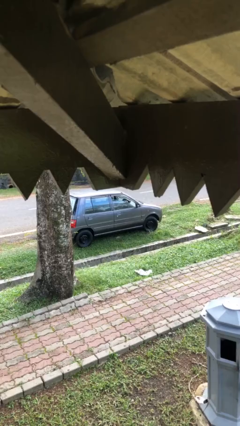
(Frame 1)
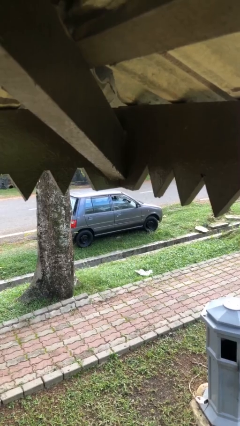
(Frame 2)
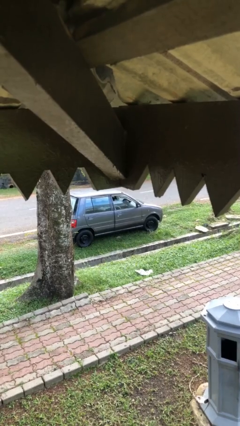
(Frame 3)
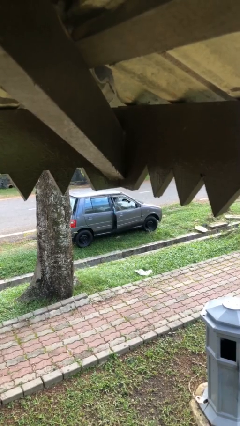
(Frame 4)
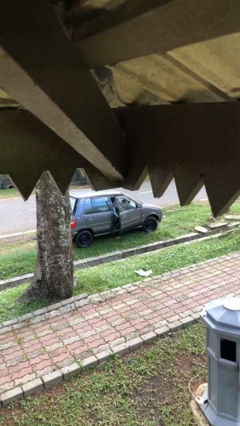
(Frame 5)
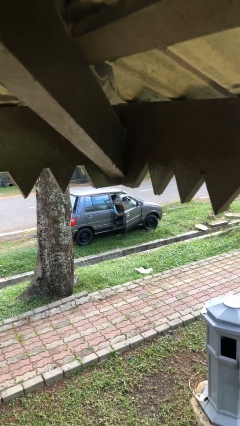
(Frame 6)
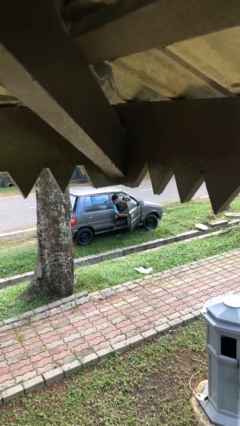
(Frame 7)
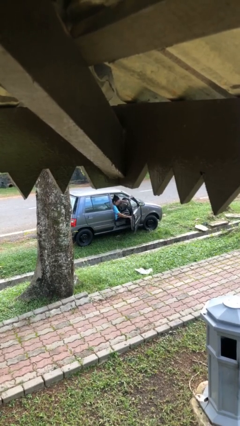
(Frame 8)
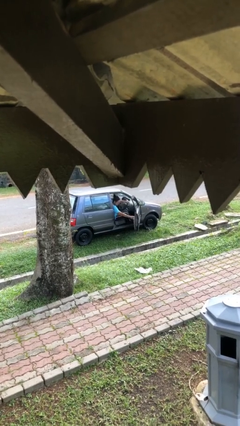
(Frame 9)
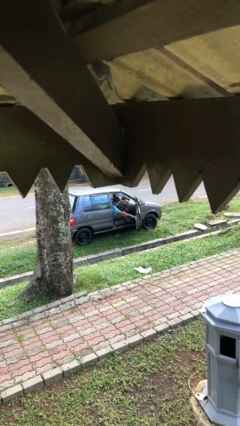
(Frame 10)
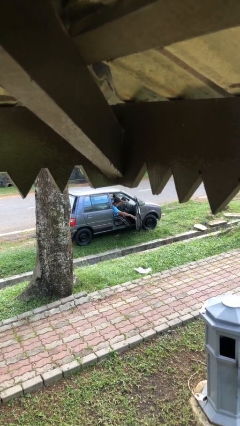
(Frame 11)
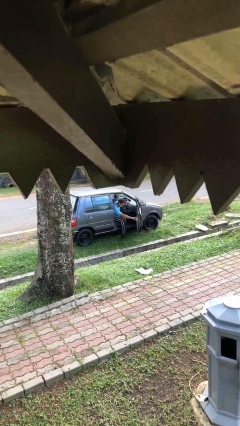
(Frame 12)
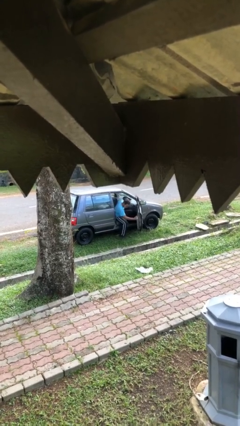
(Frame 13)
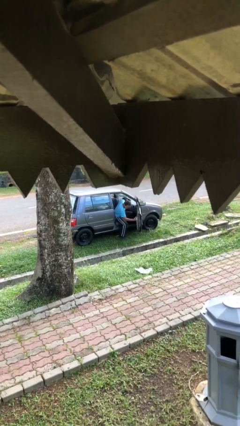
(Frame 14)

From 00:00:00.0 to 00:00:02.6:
person opens car door

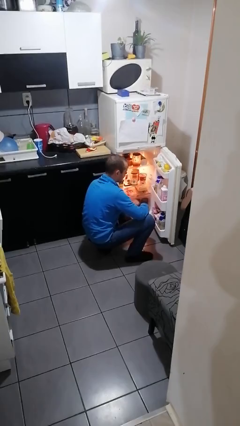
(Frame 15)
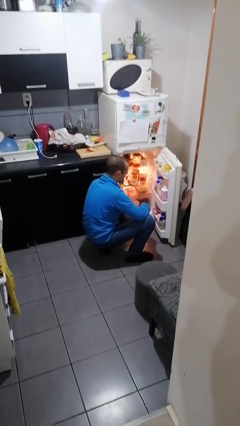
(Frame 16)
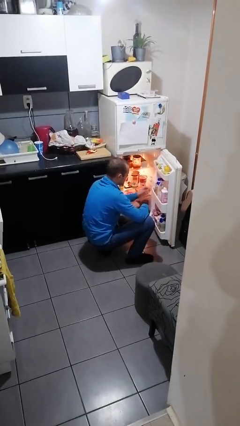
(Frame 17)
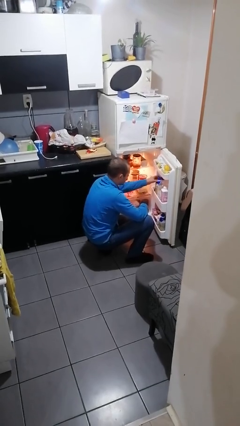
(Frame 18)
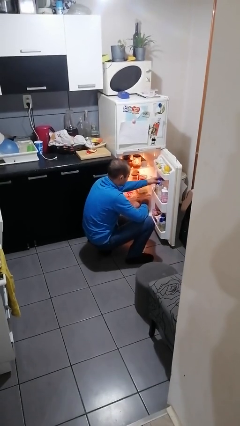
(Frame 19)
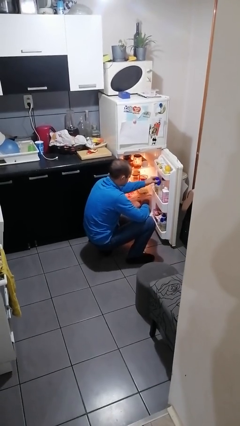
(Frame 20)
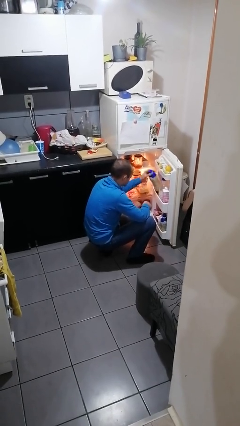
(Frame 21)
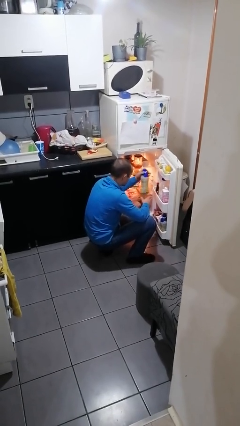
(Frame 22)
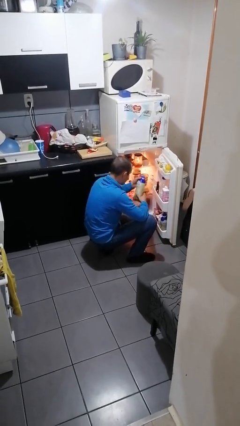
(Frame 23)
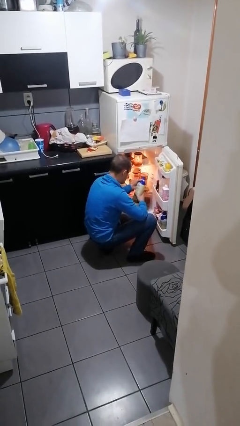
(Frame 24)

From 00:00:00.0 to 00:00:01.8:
person takes object from refrigerator

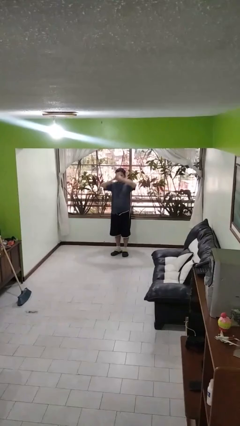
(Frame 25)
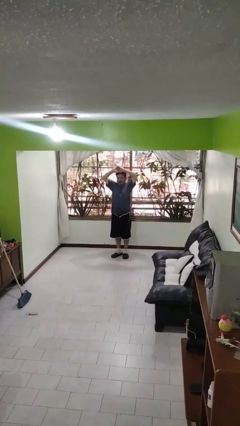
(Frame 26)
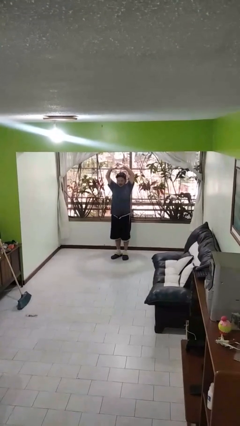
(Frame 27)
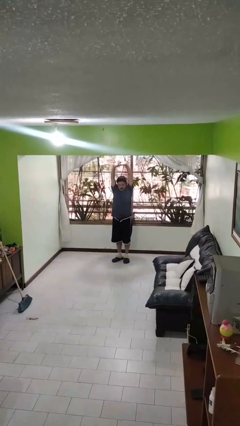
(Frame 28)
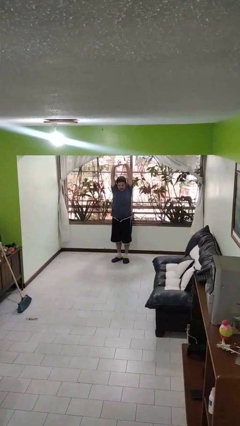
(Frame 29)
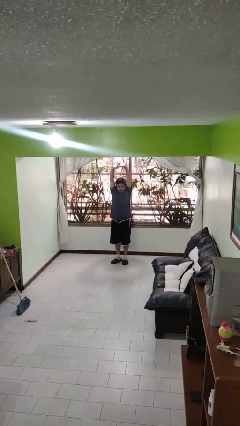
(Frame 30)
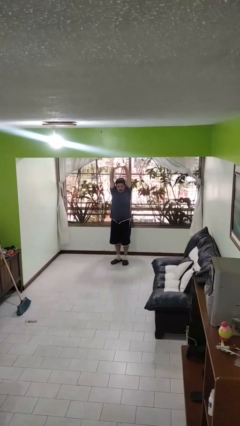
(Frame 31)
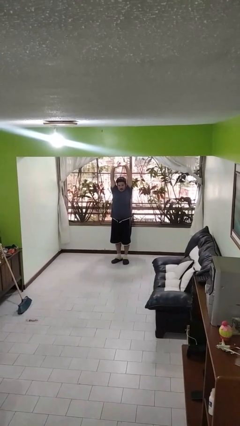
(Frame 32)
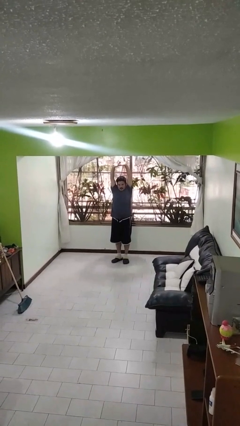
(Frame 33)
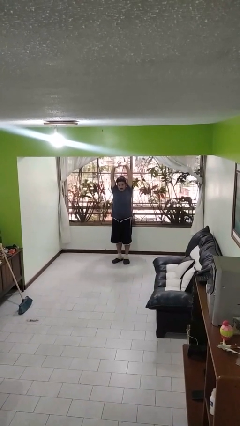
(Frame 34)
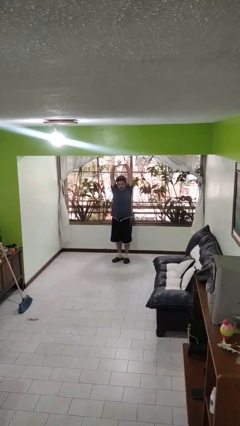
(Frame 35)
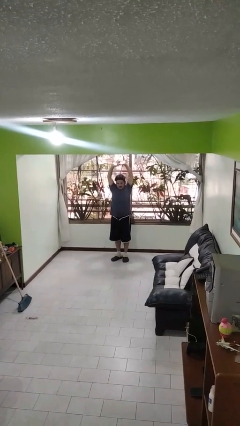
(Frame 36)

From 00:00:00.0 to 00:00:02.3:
person stretches arms over head

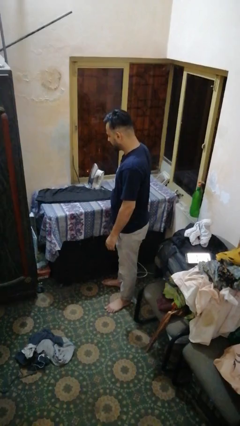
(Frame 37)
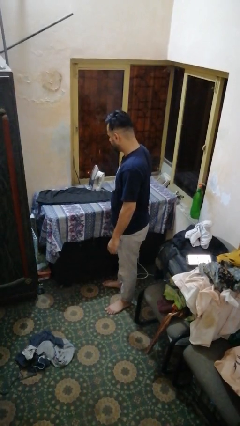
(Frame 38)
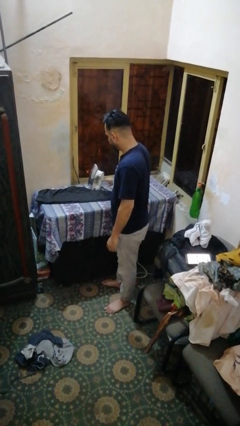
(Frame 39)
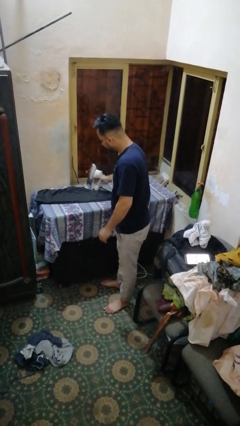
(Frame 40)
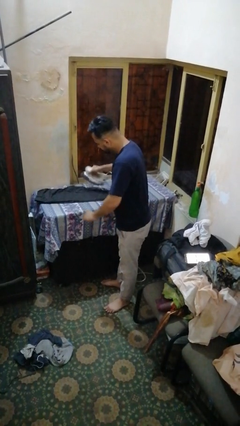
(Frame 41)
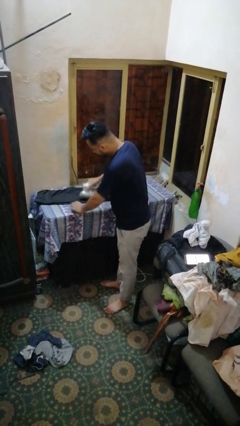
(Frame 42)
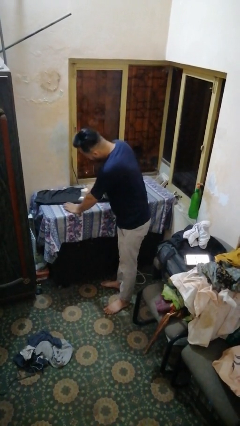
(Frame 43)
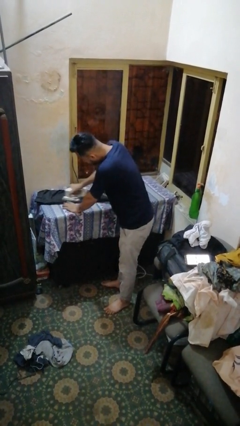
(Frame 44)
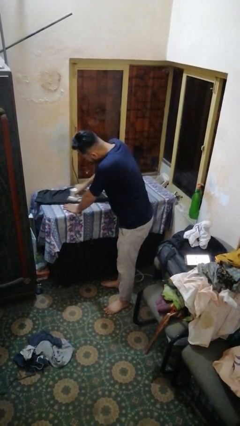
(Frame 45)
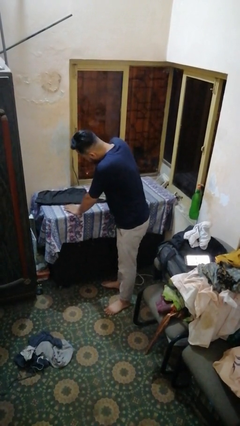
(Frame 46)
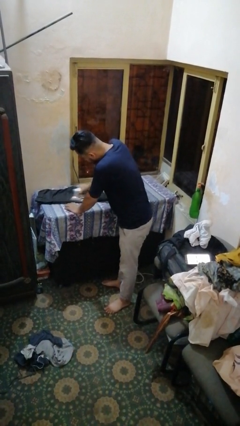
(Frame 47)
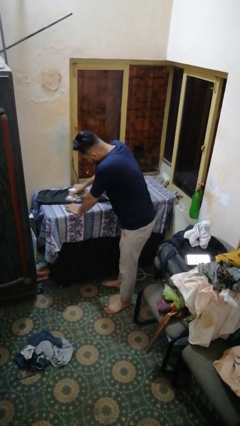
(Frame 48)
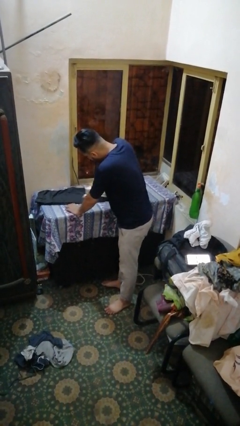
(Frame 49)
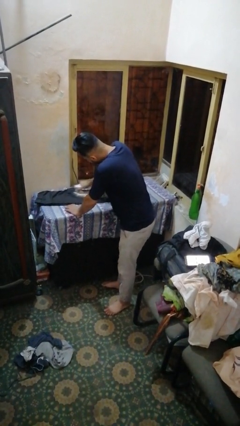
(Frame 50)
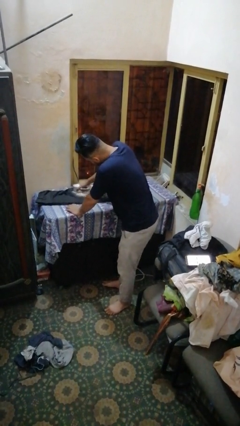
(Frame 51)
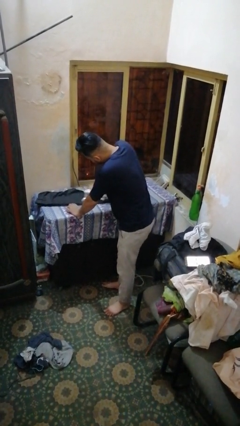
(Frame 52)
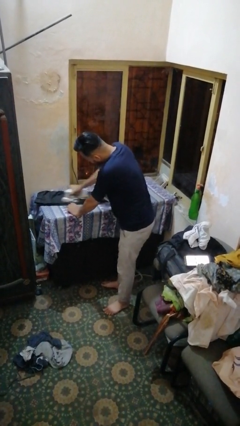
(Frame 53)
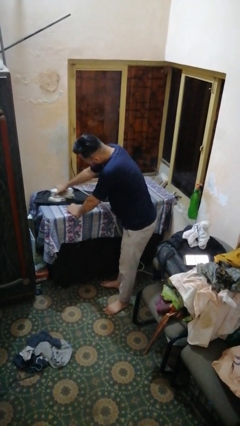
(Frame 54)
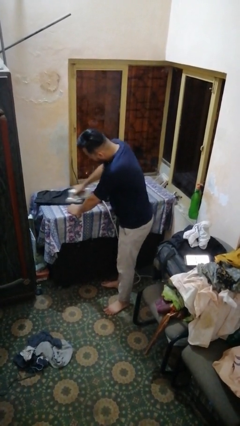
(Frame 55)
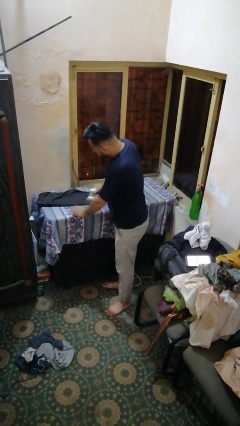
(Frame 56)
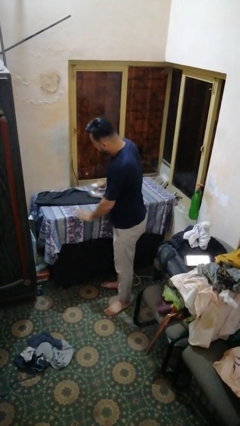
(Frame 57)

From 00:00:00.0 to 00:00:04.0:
person irons clothes

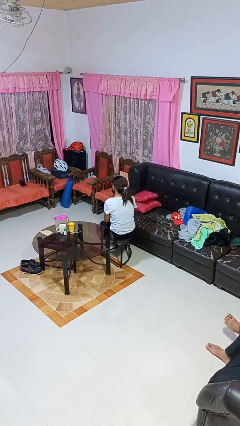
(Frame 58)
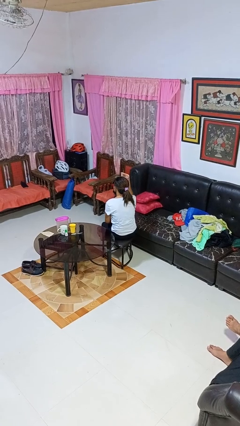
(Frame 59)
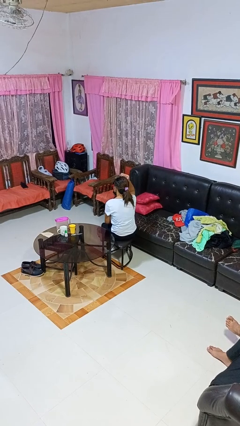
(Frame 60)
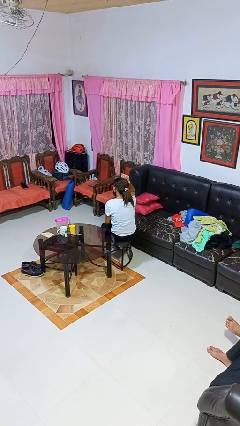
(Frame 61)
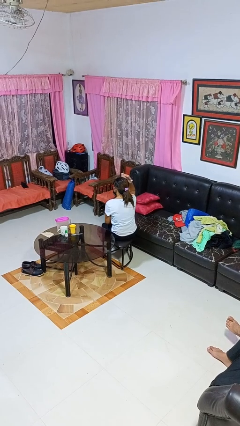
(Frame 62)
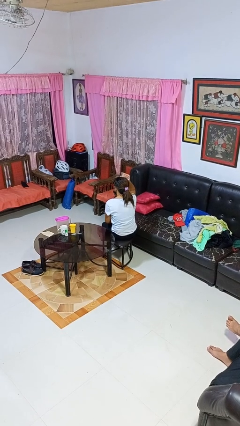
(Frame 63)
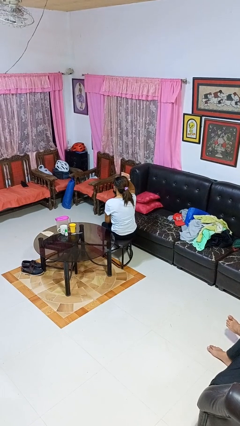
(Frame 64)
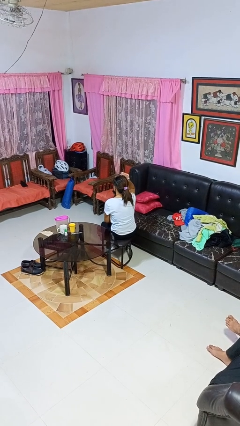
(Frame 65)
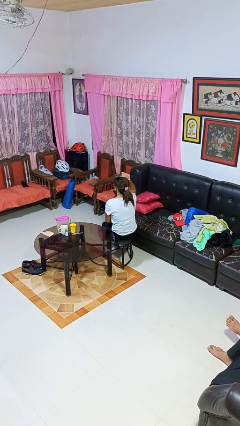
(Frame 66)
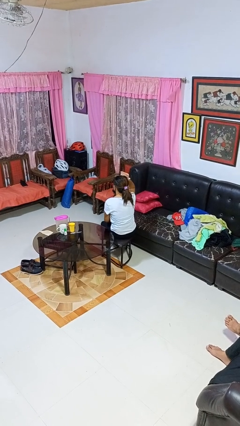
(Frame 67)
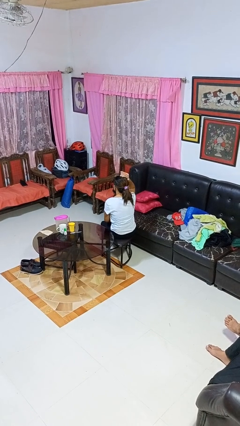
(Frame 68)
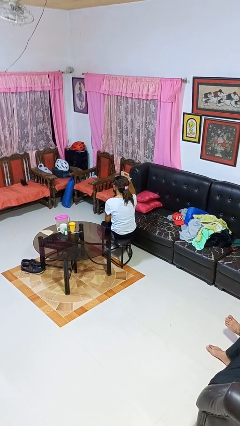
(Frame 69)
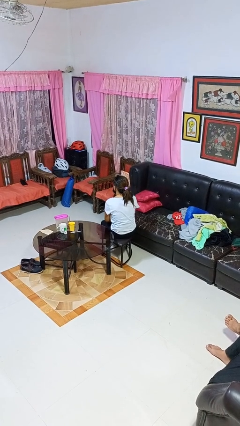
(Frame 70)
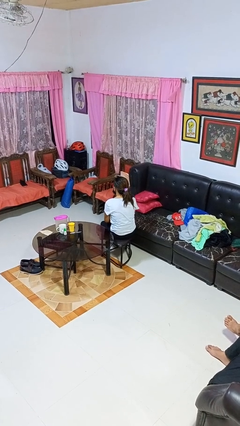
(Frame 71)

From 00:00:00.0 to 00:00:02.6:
person pats head

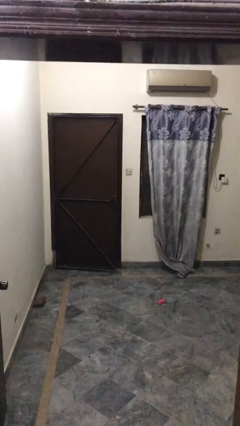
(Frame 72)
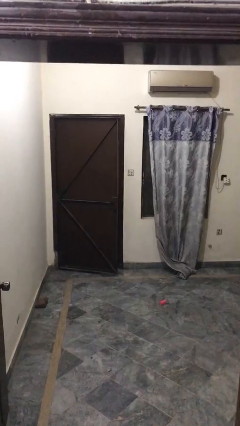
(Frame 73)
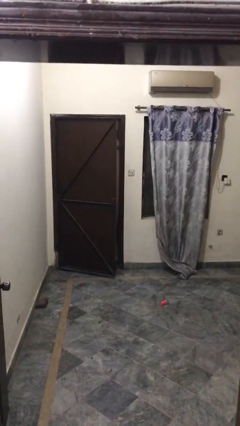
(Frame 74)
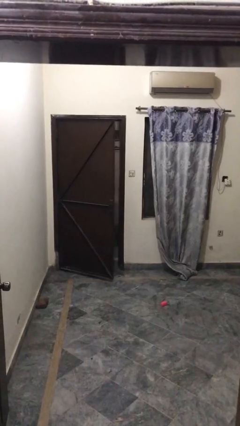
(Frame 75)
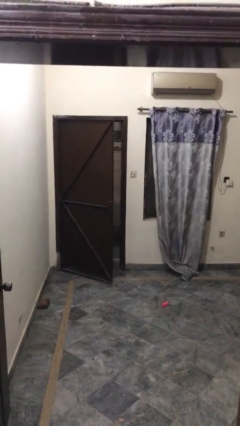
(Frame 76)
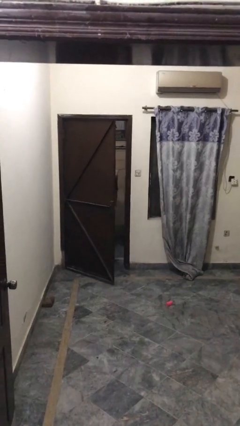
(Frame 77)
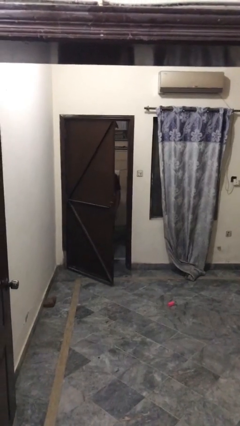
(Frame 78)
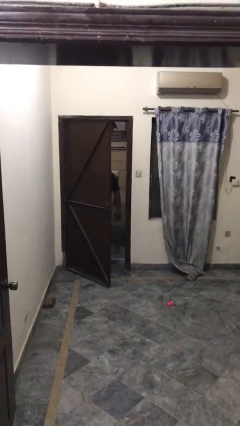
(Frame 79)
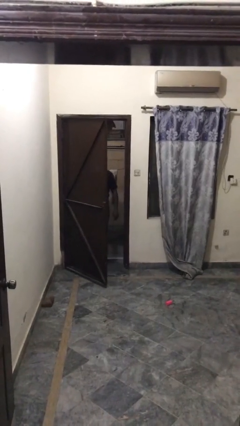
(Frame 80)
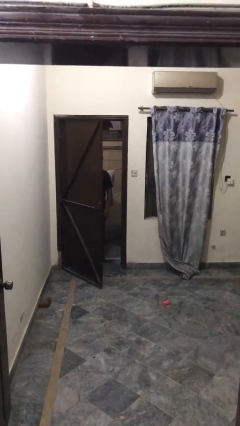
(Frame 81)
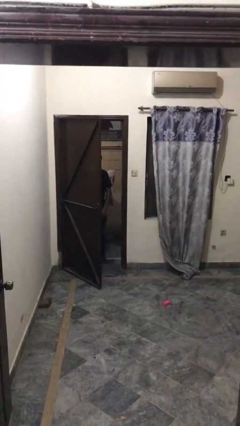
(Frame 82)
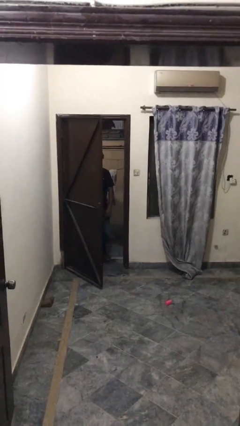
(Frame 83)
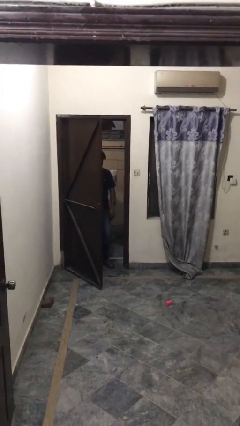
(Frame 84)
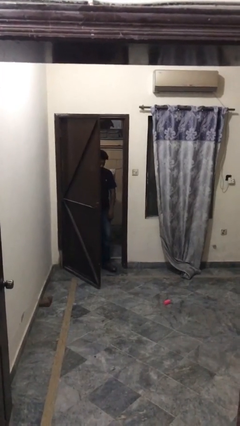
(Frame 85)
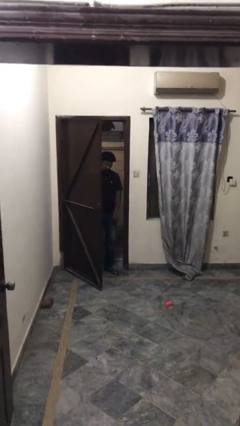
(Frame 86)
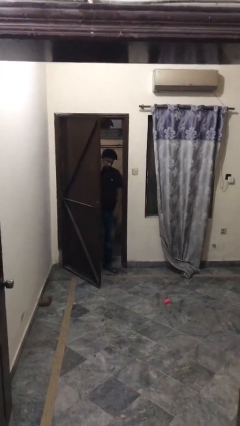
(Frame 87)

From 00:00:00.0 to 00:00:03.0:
person opens facility door

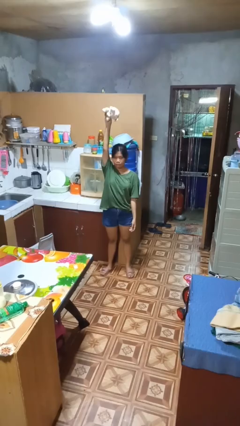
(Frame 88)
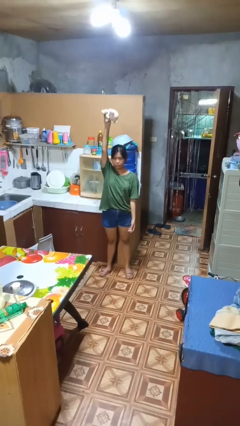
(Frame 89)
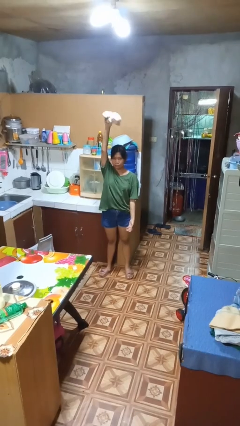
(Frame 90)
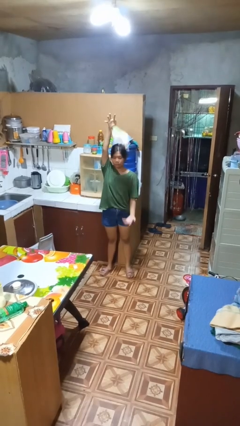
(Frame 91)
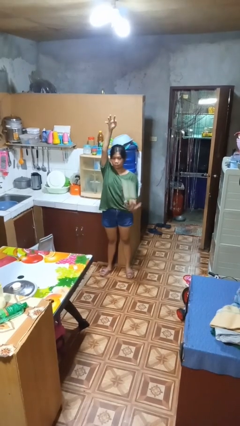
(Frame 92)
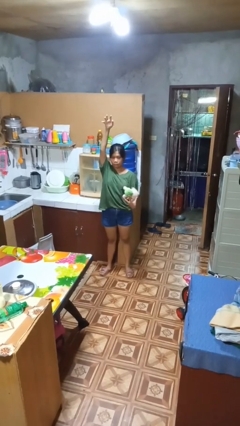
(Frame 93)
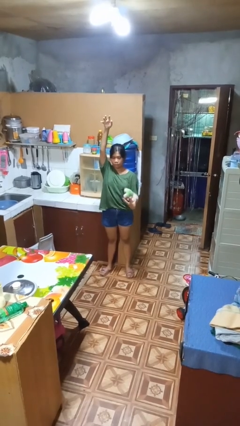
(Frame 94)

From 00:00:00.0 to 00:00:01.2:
person drops object
